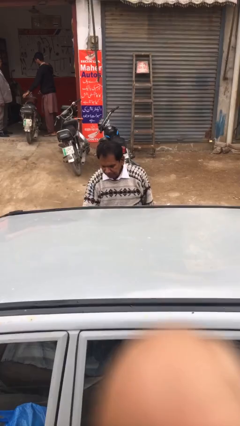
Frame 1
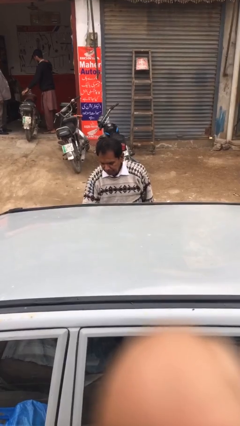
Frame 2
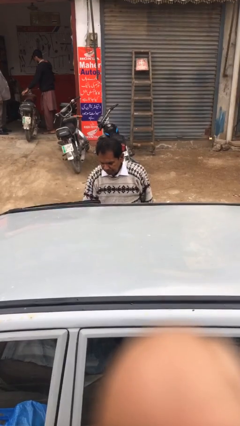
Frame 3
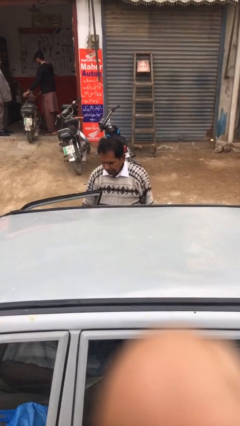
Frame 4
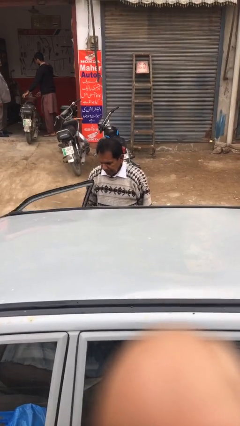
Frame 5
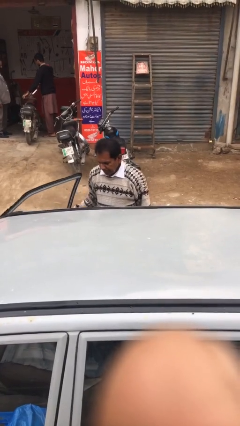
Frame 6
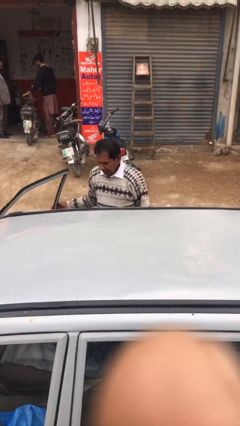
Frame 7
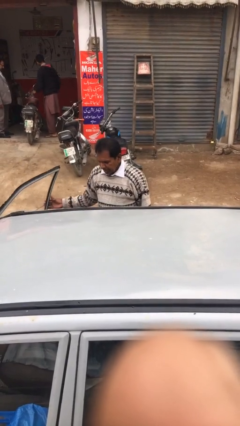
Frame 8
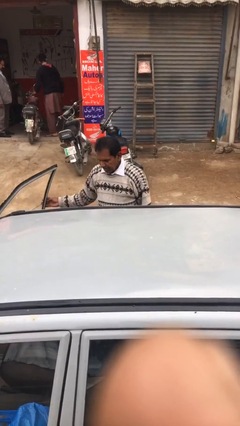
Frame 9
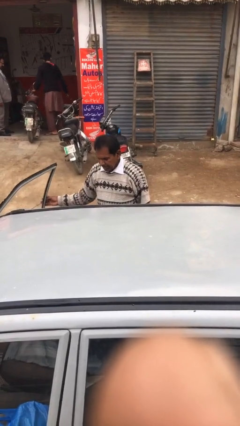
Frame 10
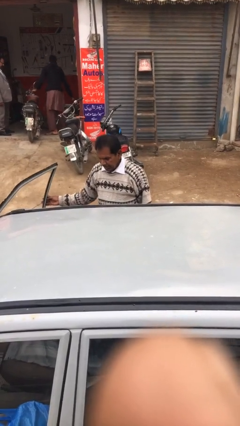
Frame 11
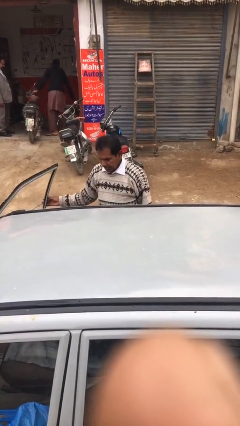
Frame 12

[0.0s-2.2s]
person opens car door

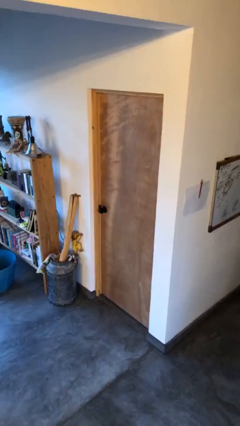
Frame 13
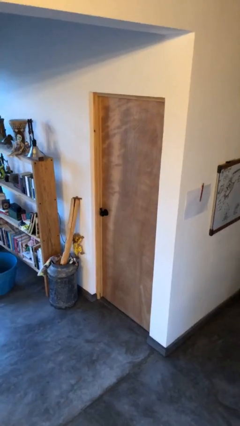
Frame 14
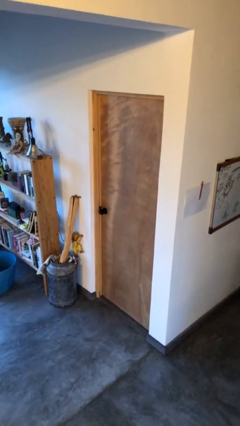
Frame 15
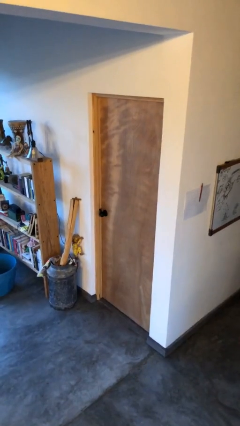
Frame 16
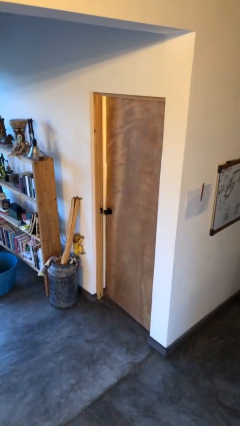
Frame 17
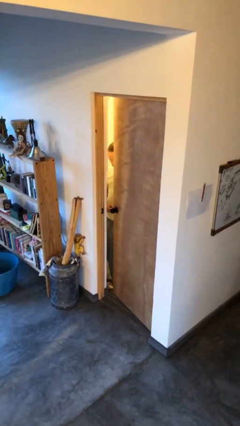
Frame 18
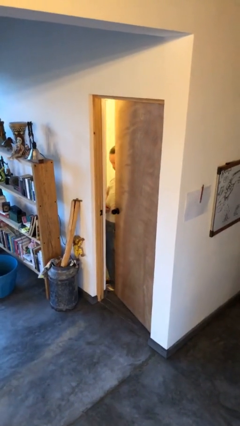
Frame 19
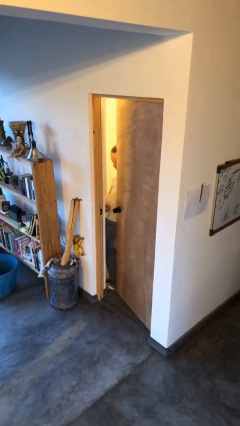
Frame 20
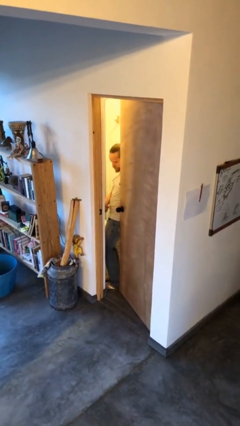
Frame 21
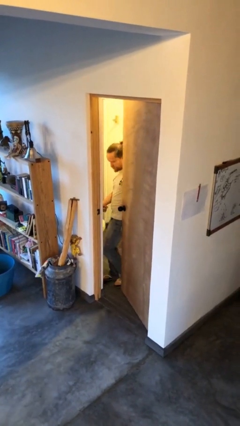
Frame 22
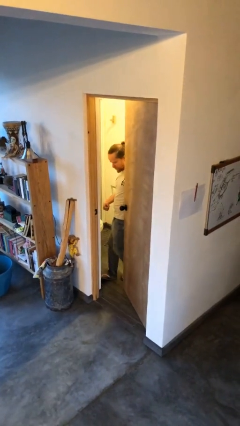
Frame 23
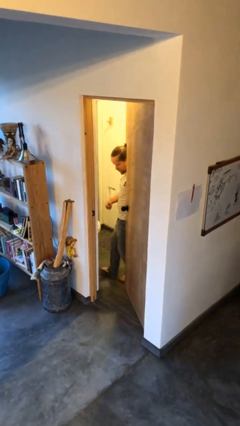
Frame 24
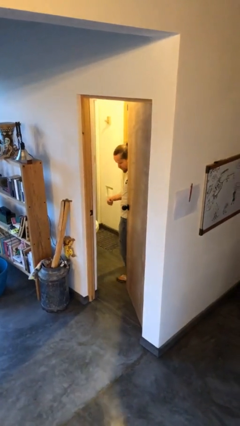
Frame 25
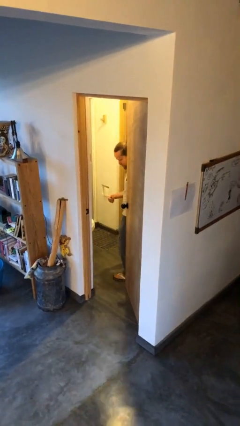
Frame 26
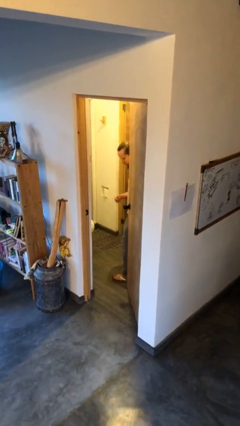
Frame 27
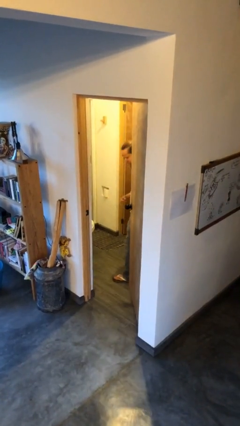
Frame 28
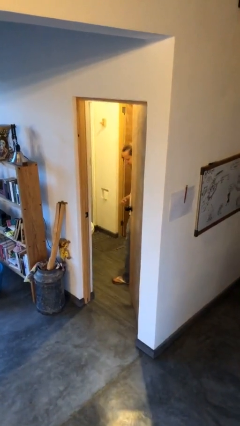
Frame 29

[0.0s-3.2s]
person opens facility door

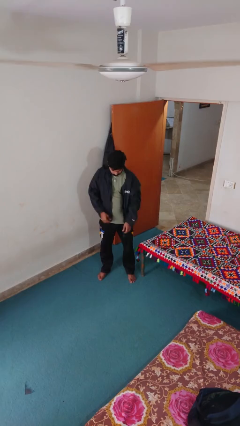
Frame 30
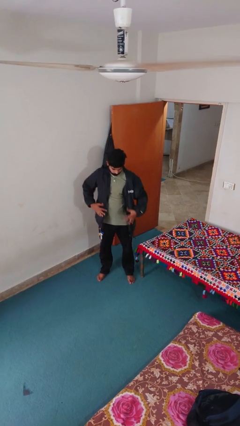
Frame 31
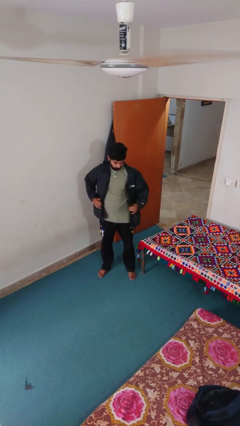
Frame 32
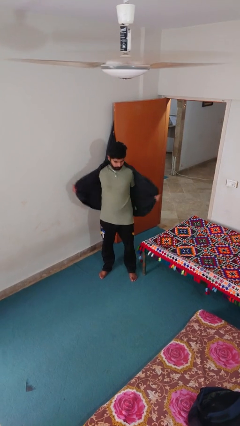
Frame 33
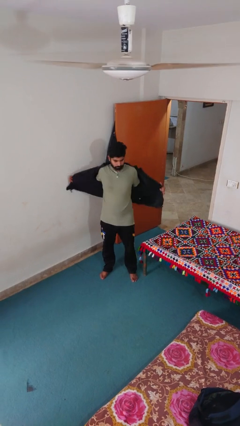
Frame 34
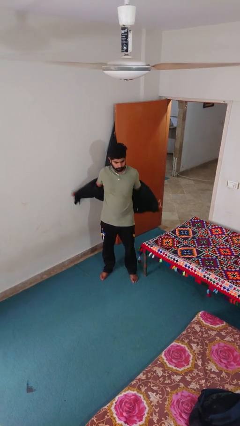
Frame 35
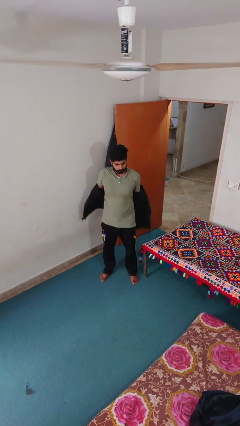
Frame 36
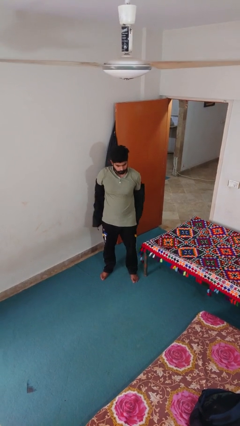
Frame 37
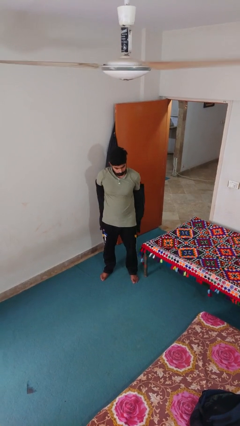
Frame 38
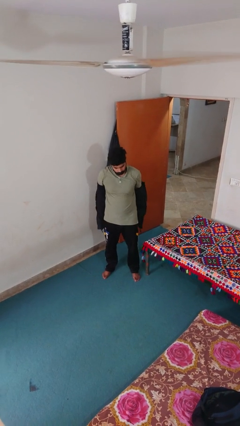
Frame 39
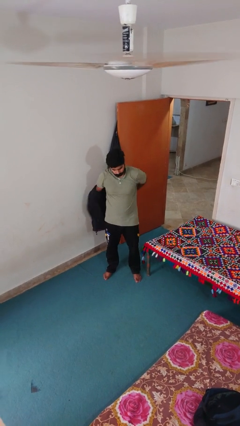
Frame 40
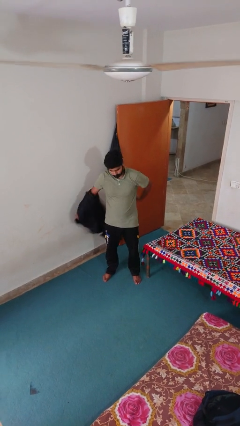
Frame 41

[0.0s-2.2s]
person takes off jacket

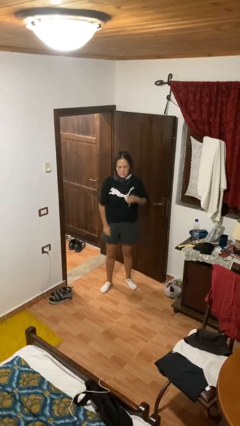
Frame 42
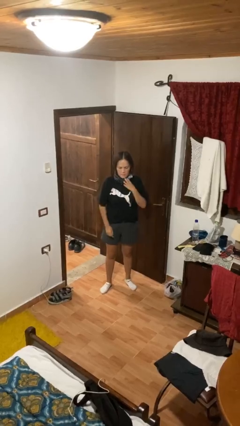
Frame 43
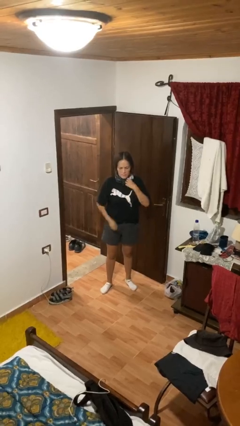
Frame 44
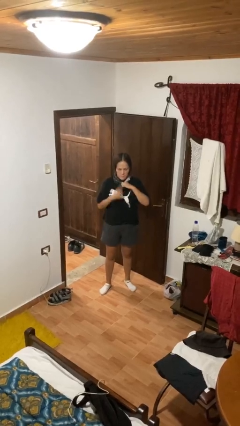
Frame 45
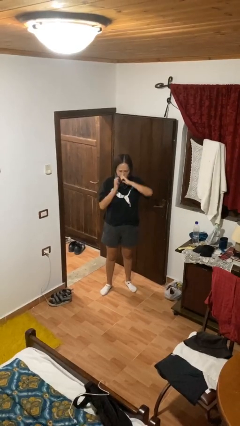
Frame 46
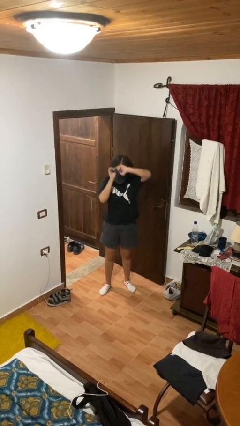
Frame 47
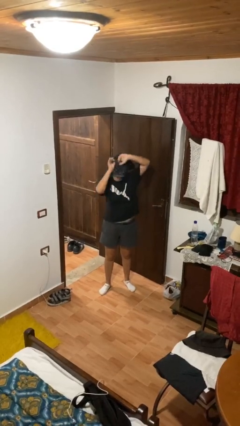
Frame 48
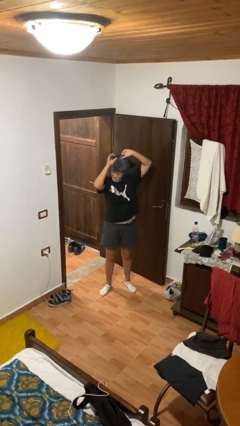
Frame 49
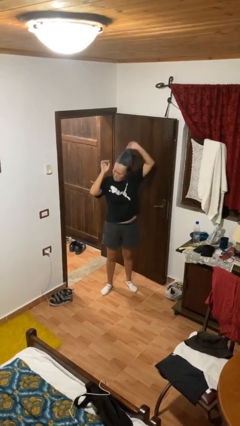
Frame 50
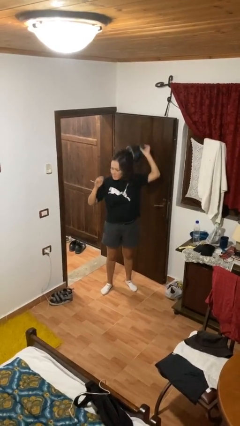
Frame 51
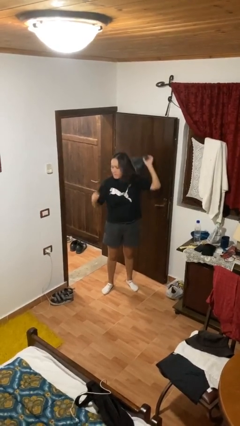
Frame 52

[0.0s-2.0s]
person takes off scarf

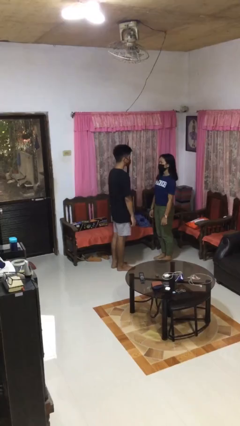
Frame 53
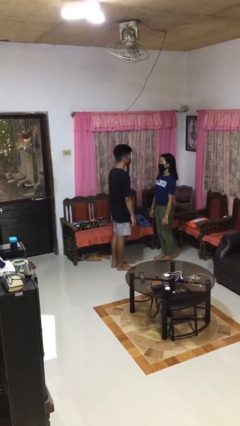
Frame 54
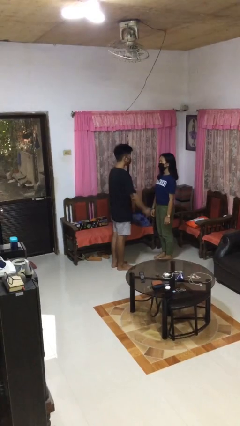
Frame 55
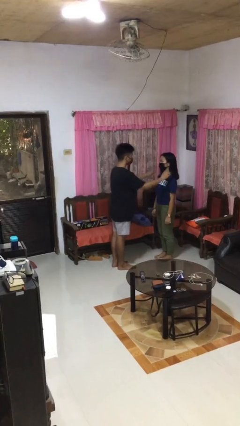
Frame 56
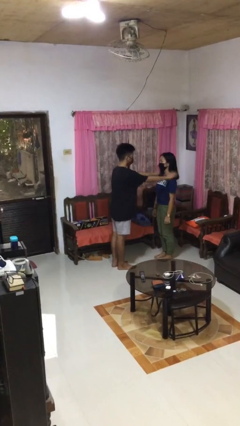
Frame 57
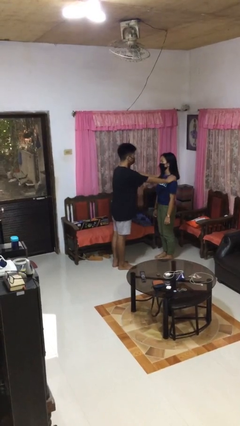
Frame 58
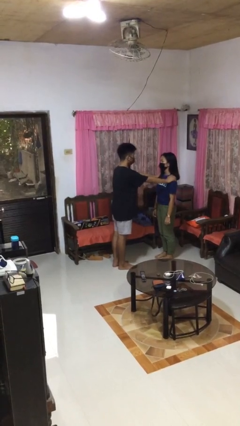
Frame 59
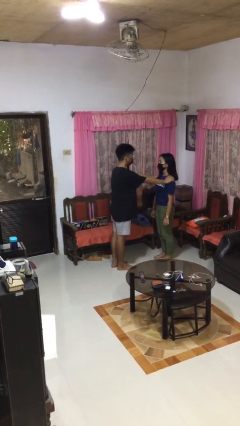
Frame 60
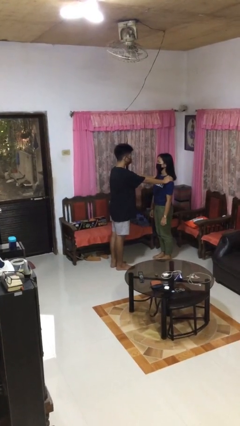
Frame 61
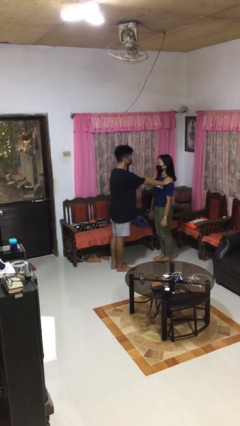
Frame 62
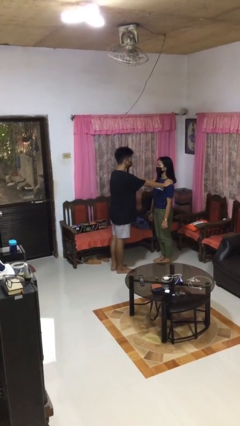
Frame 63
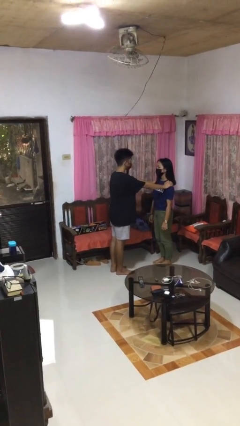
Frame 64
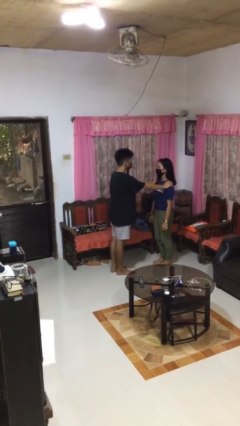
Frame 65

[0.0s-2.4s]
person grabs person by shoulder

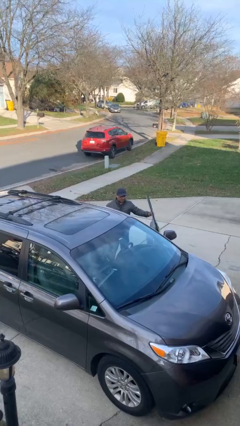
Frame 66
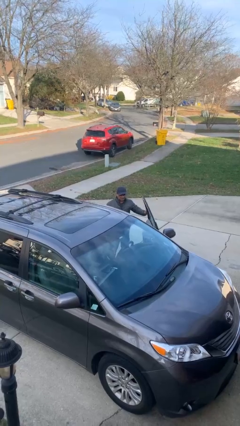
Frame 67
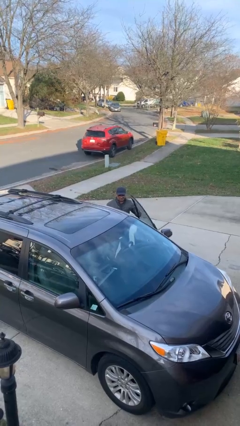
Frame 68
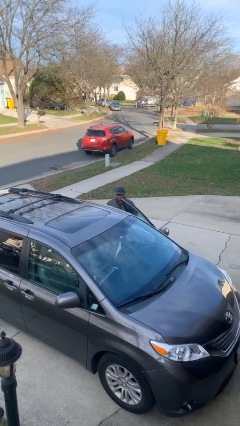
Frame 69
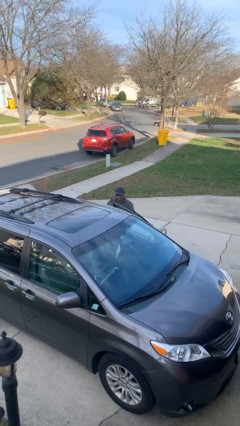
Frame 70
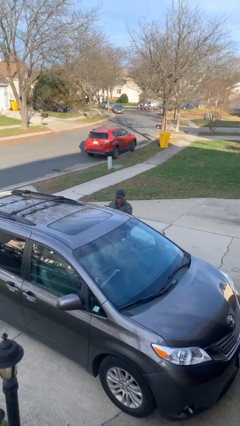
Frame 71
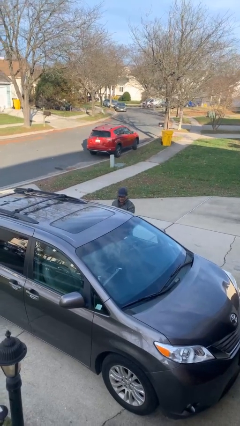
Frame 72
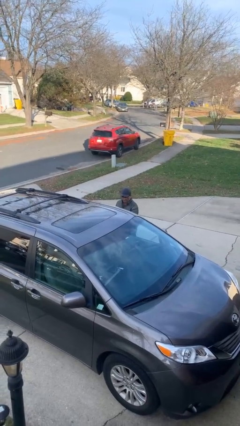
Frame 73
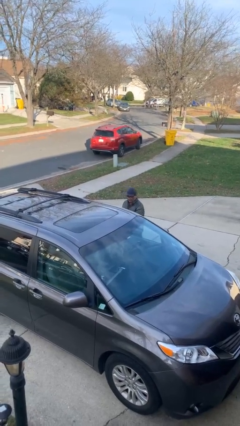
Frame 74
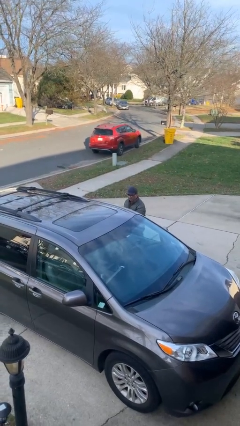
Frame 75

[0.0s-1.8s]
person closes car door

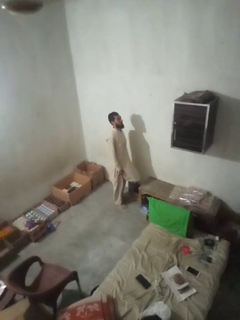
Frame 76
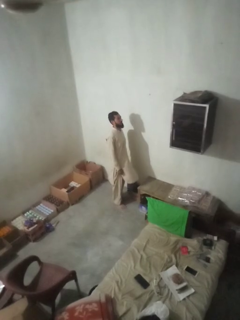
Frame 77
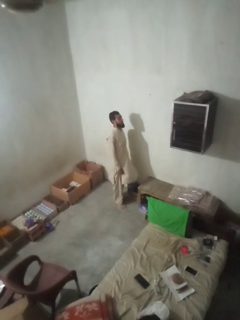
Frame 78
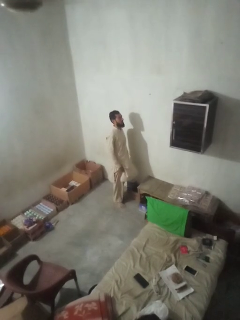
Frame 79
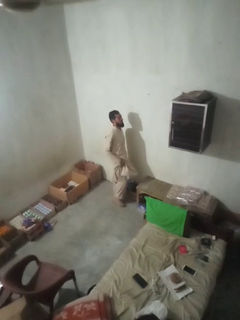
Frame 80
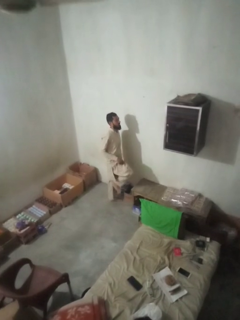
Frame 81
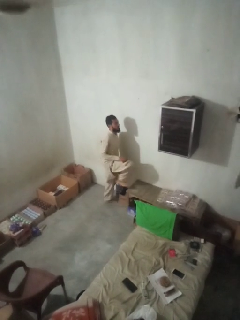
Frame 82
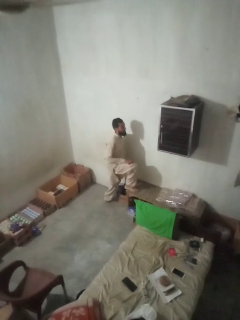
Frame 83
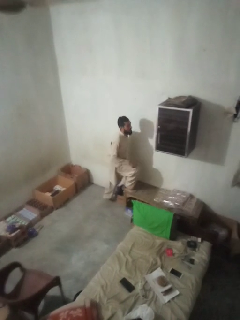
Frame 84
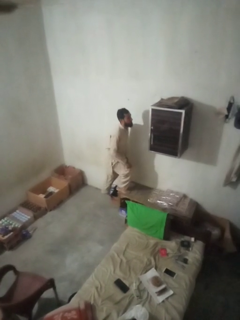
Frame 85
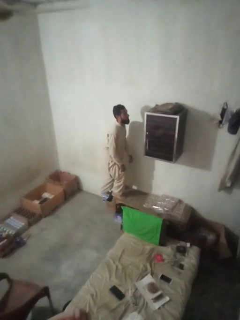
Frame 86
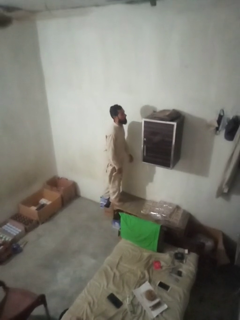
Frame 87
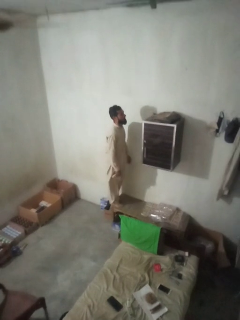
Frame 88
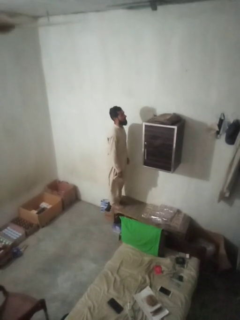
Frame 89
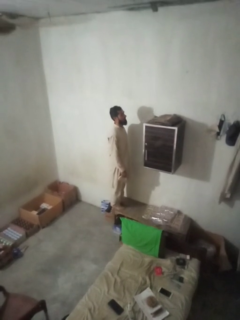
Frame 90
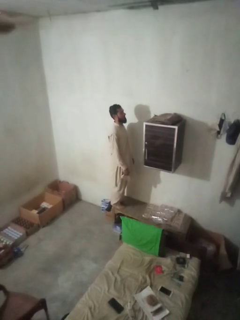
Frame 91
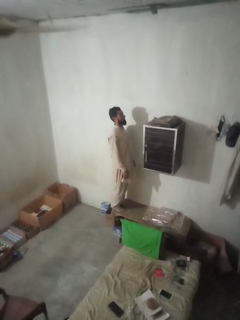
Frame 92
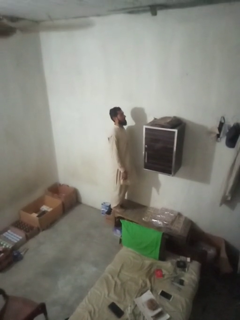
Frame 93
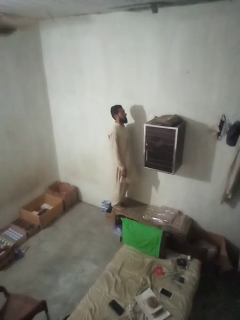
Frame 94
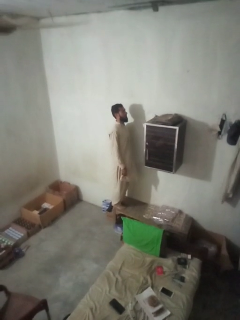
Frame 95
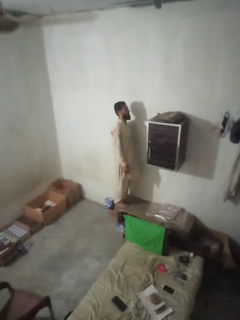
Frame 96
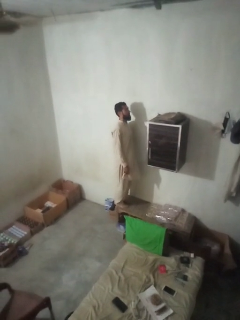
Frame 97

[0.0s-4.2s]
person climbs on table
